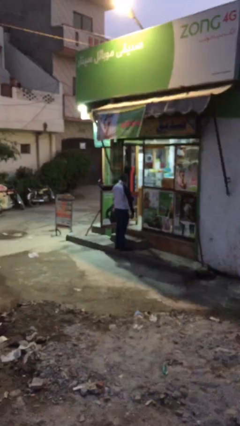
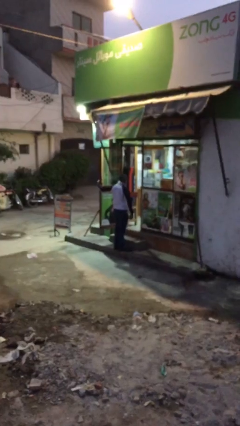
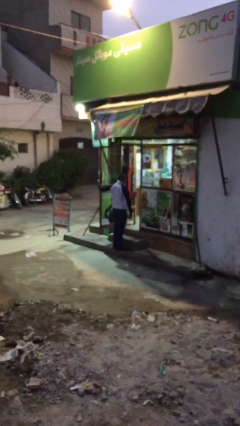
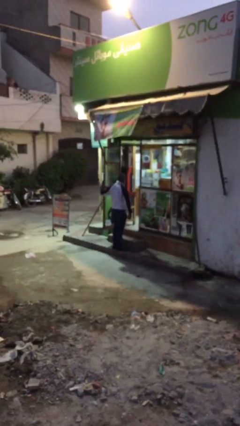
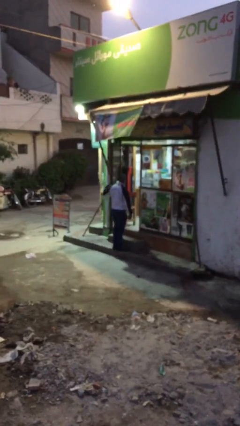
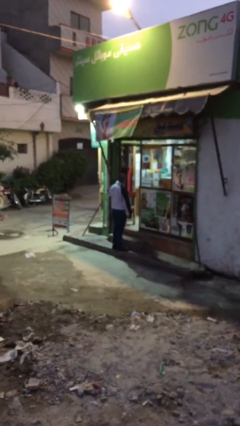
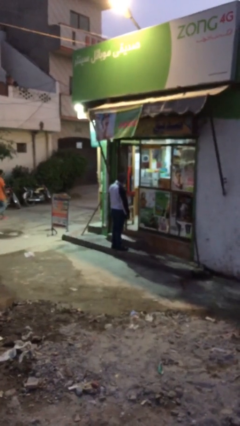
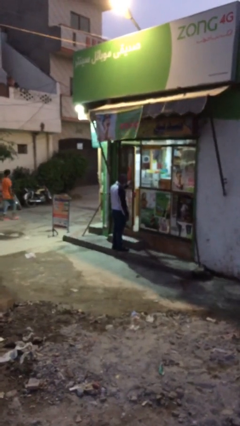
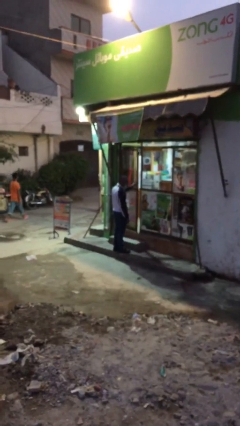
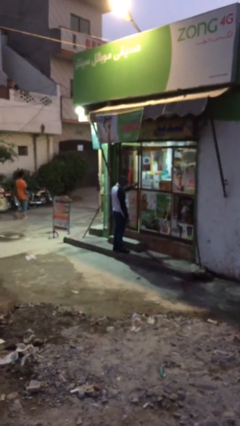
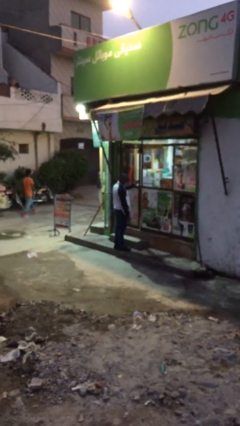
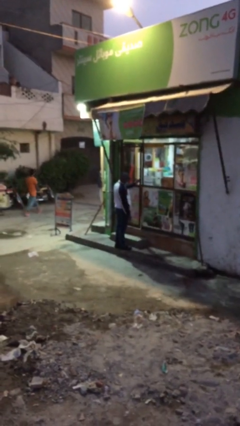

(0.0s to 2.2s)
person closes facility door

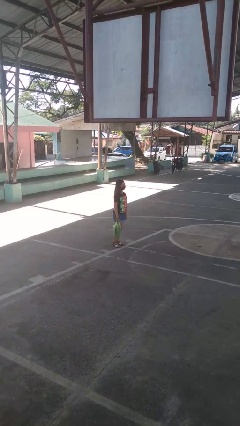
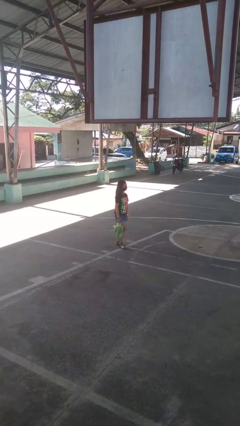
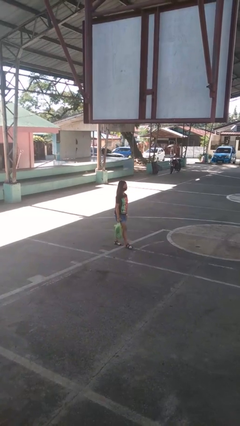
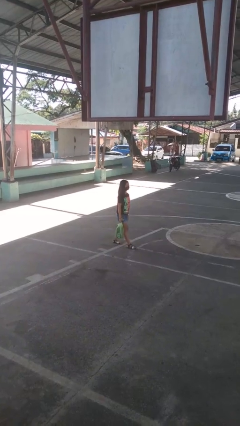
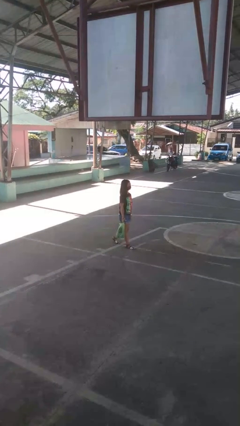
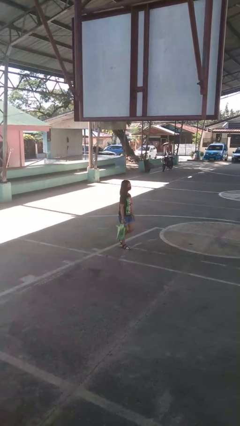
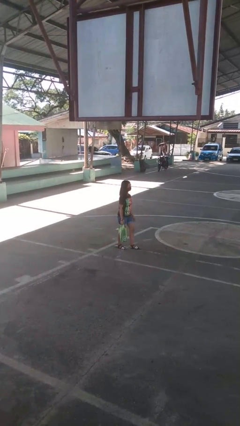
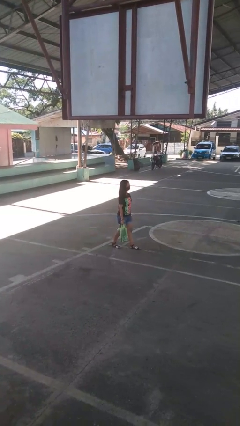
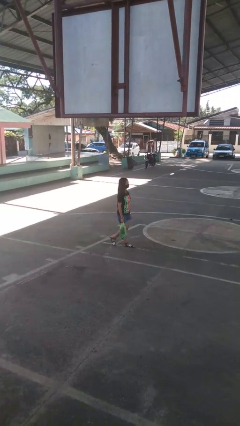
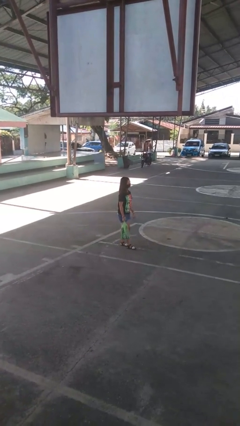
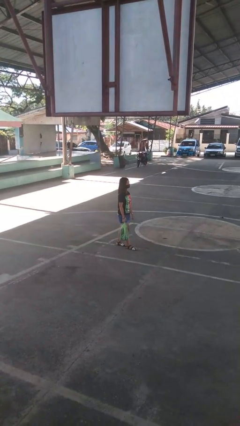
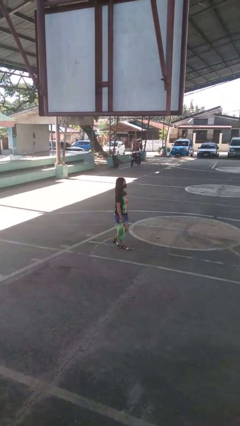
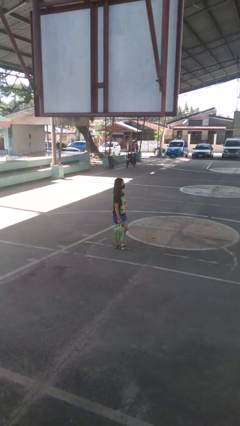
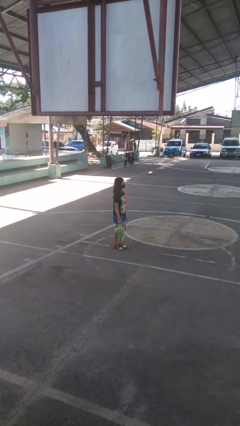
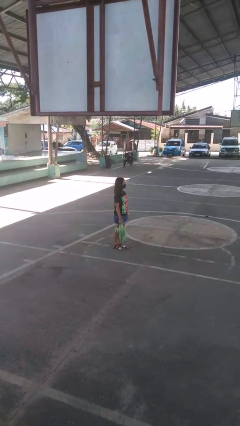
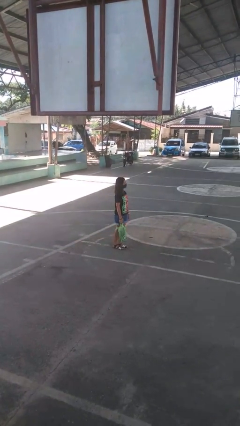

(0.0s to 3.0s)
person carries groceries

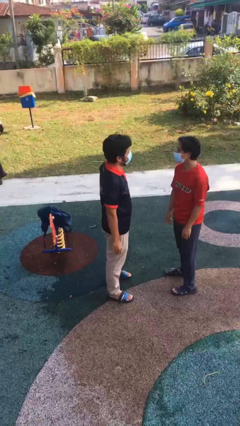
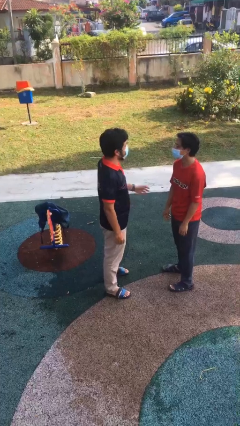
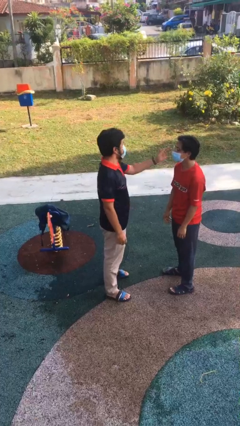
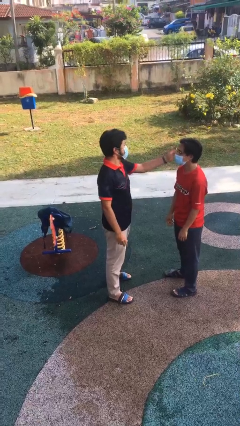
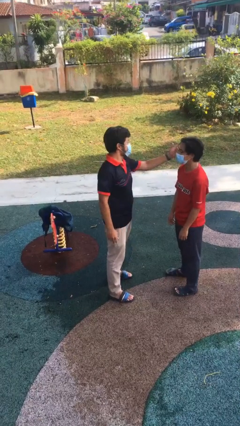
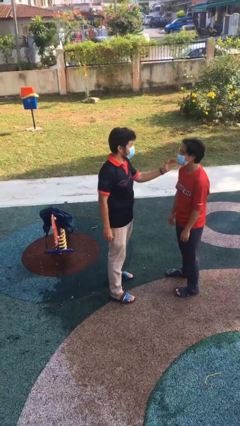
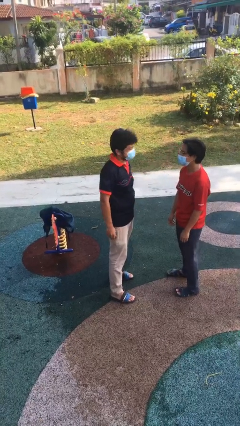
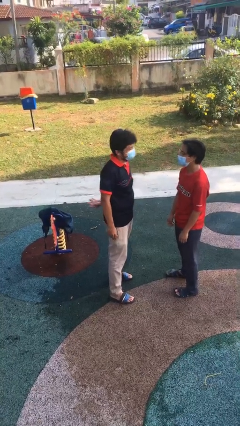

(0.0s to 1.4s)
person touches face of person

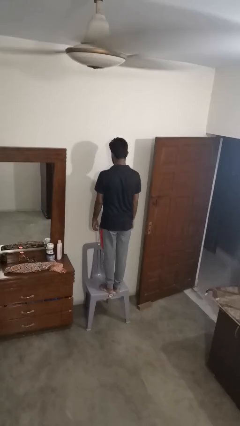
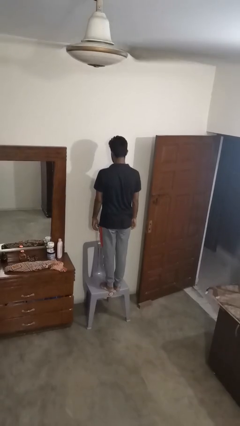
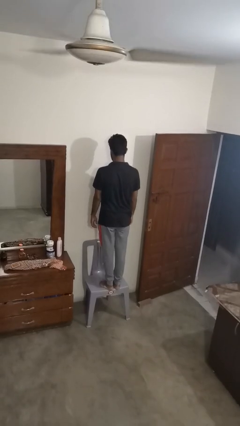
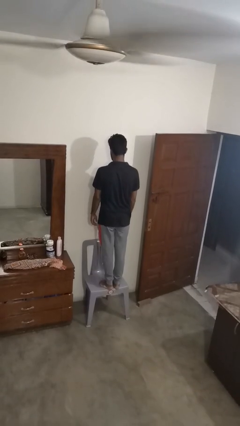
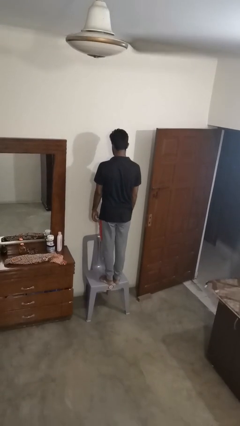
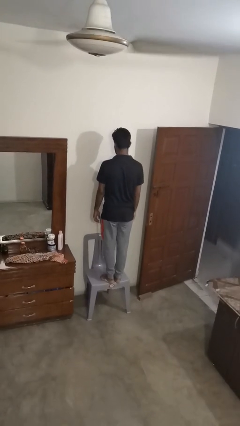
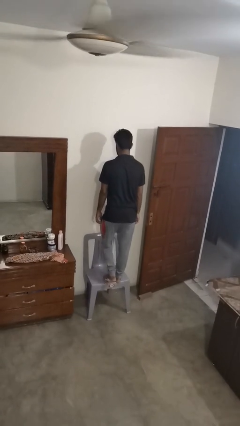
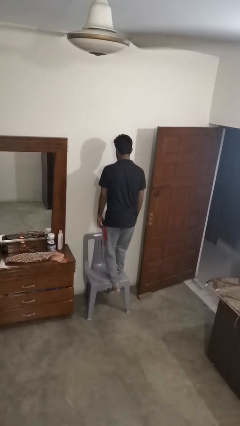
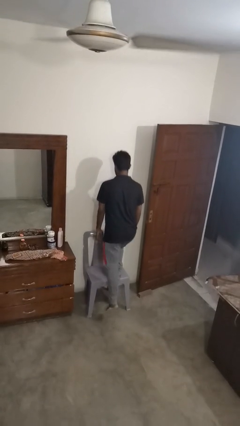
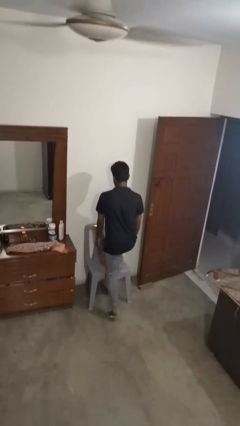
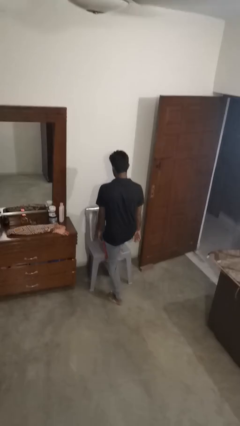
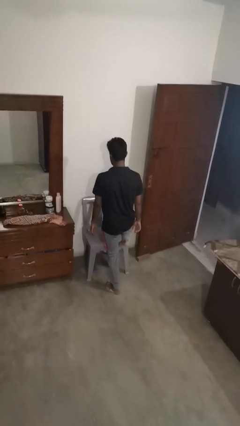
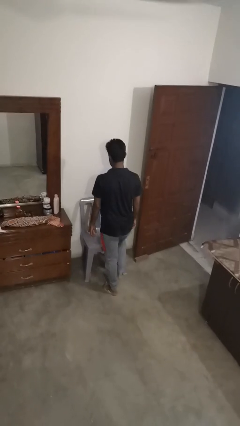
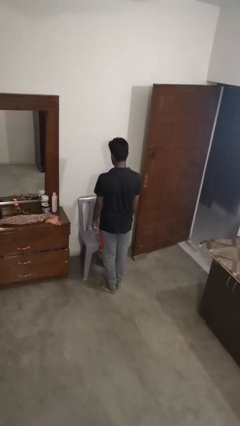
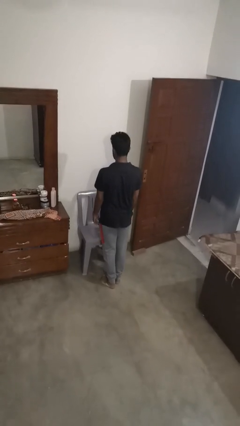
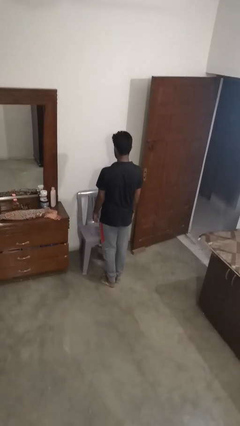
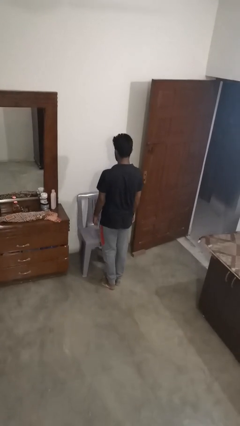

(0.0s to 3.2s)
person climbs off chair

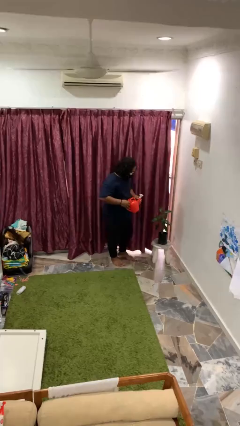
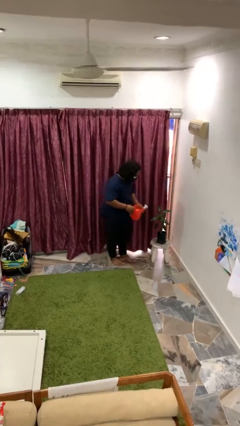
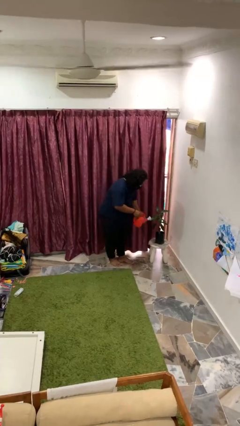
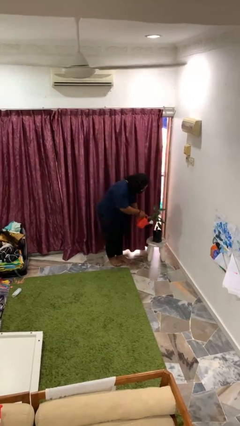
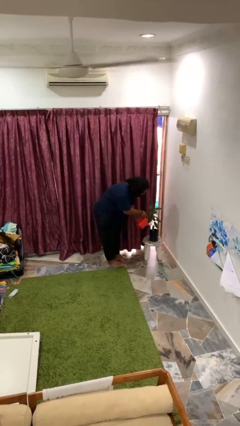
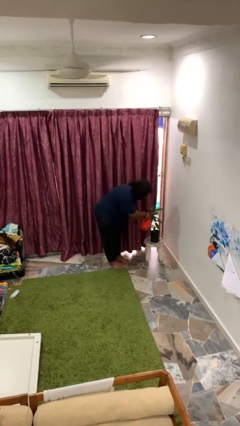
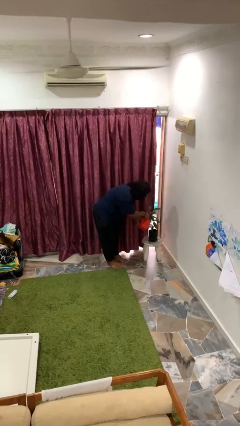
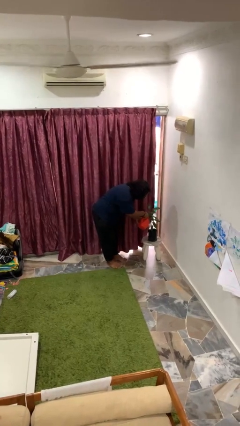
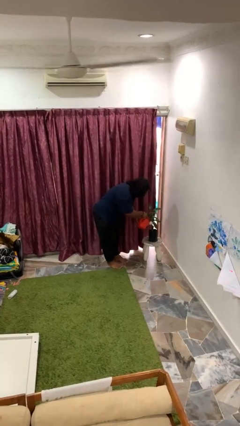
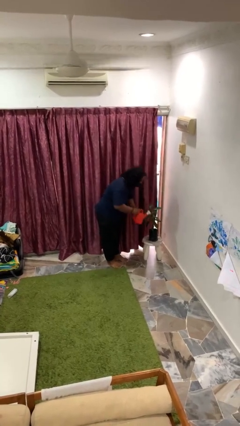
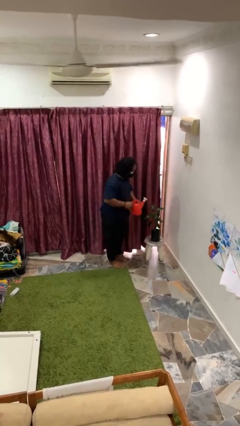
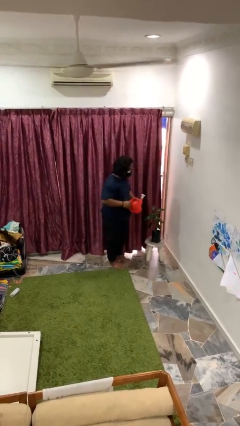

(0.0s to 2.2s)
person waters houseplant

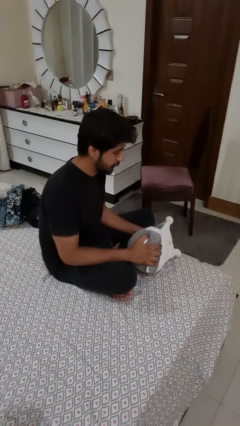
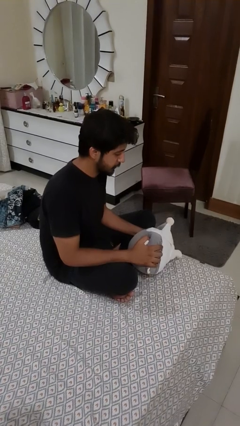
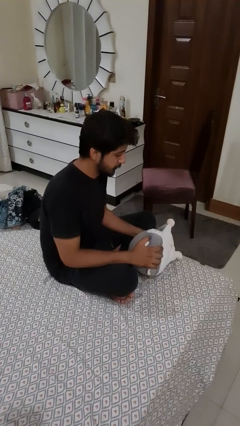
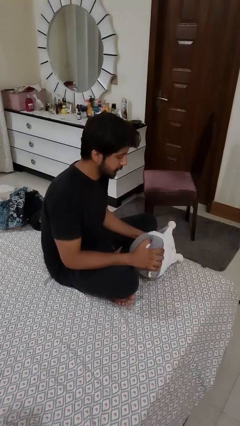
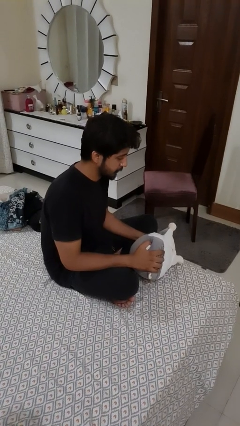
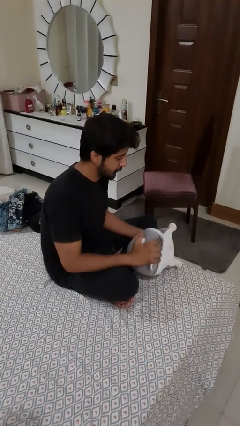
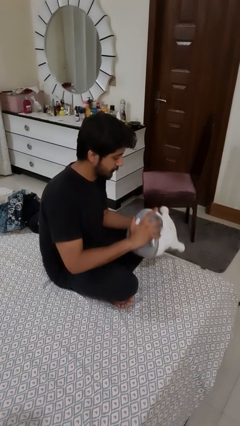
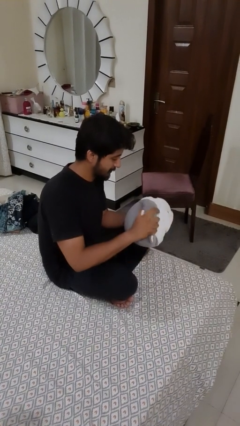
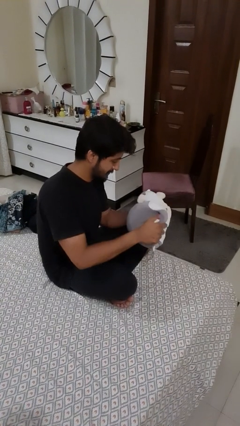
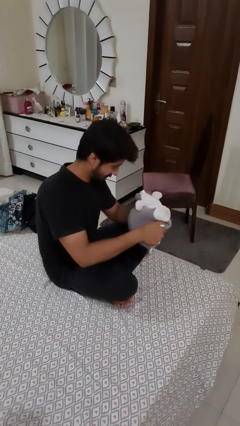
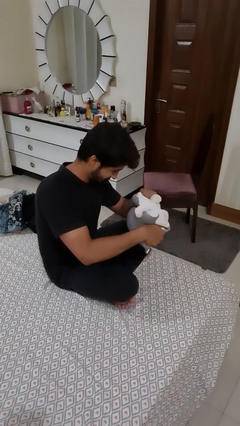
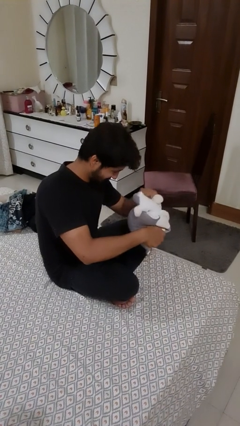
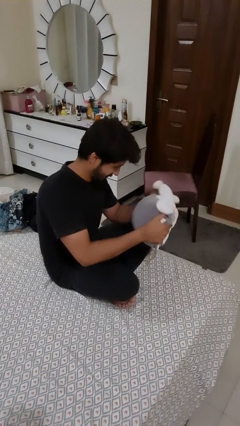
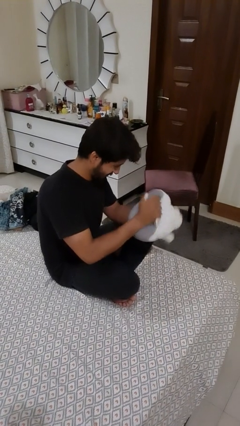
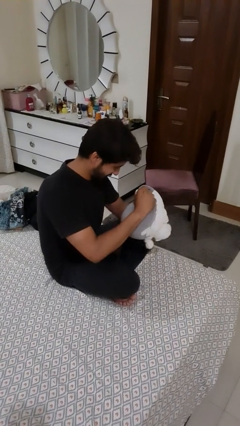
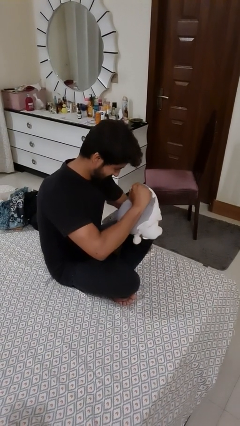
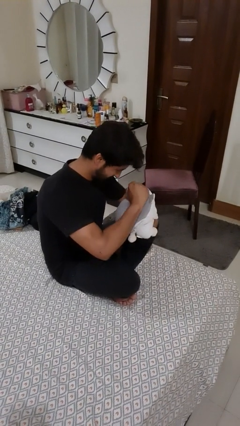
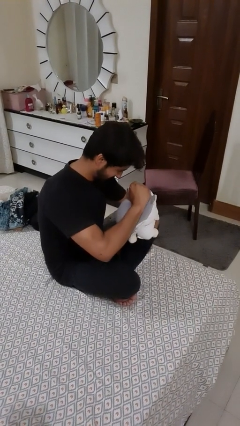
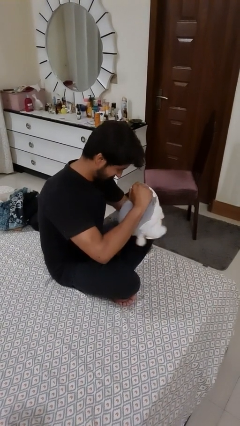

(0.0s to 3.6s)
person squeezes object

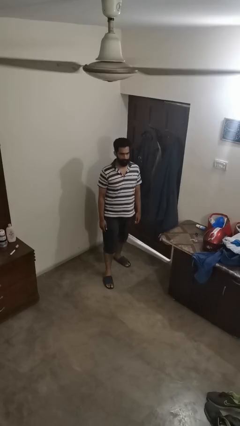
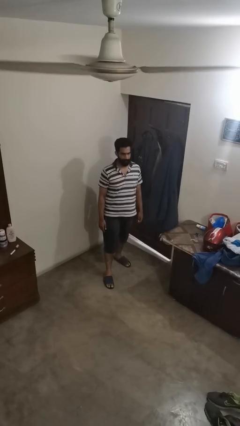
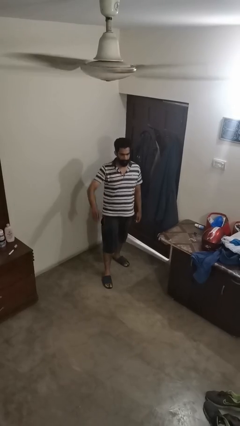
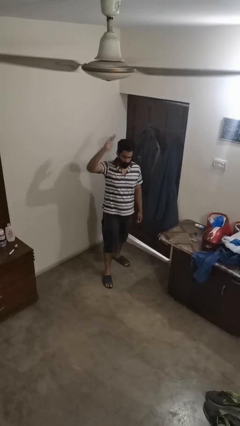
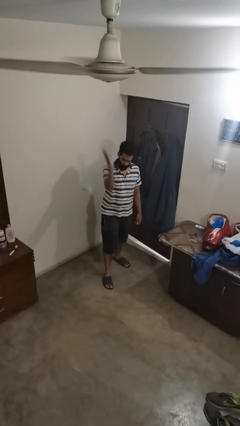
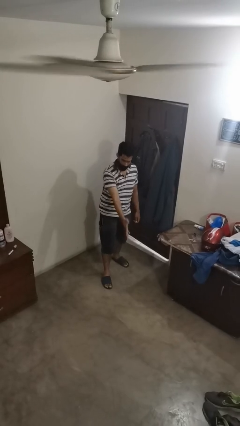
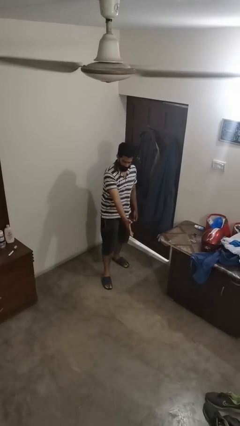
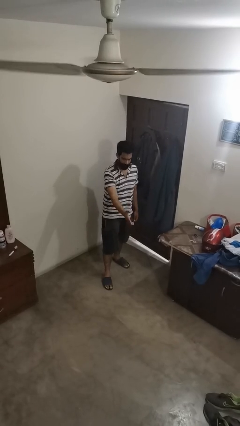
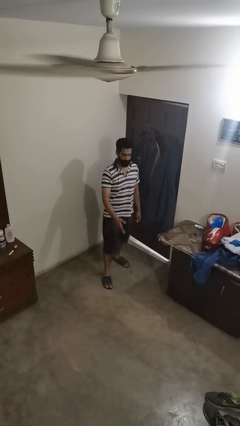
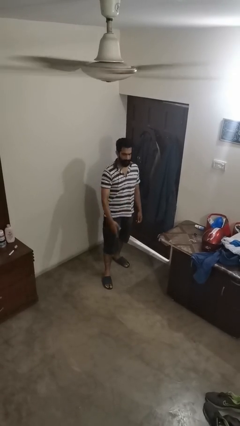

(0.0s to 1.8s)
person karate chop
